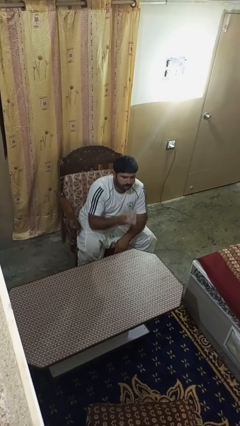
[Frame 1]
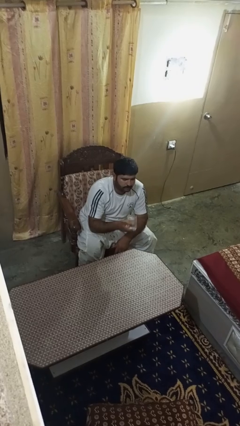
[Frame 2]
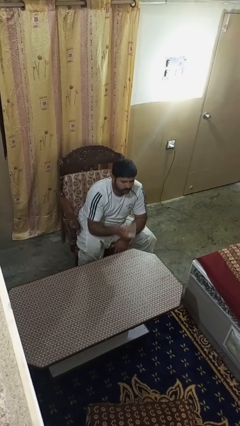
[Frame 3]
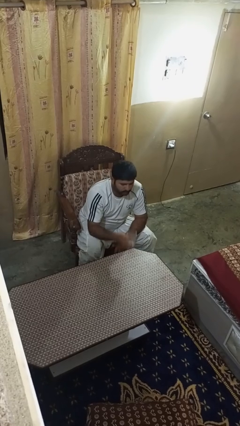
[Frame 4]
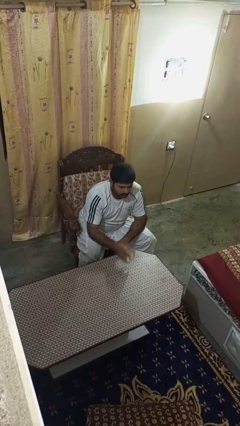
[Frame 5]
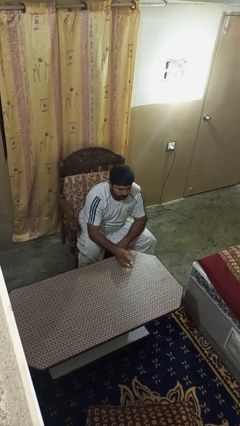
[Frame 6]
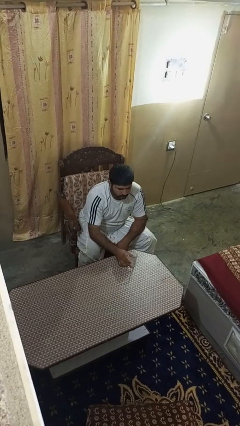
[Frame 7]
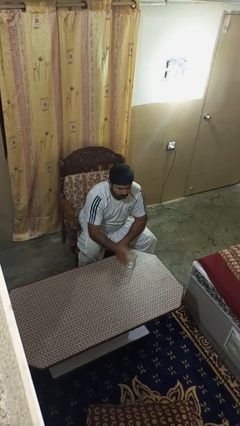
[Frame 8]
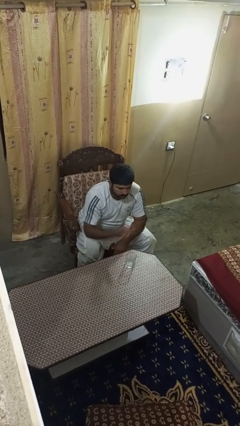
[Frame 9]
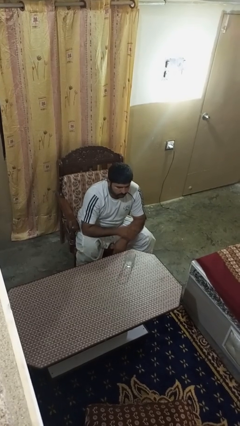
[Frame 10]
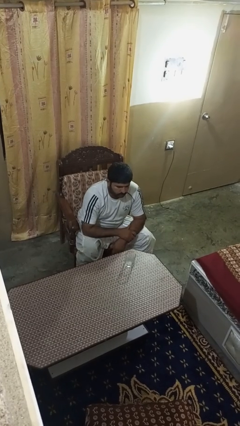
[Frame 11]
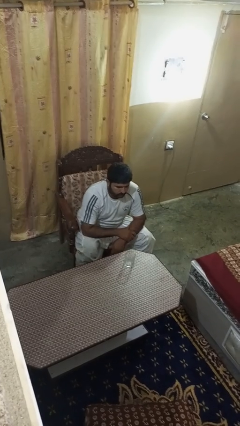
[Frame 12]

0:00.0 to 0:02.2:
person puts down object on table

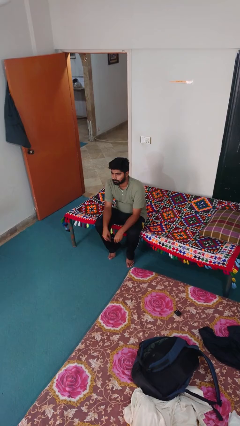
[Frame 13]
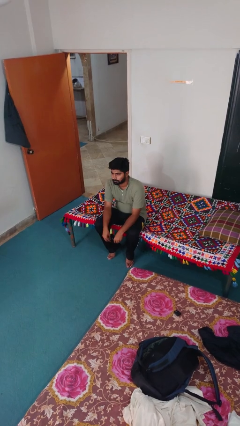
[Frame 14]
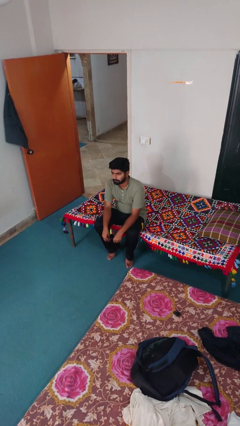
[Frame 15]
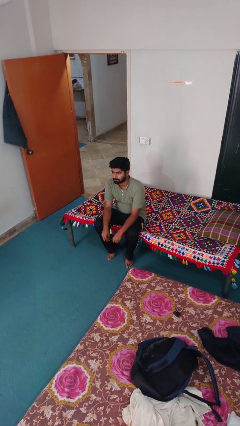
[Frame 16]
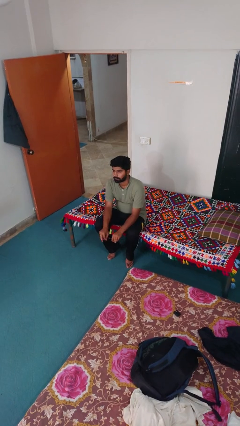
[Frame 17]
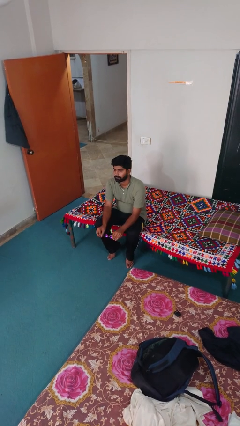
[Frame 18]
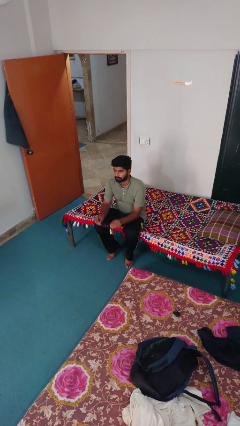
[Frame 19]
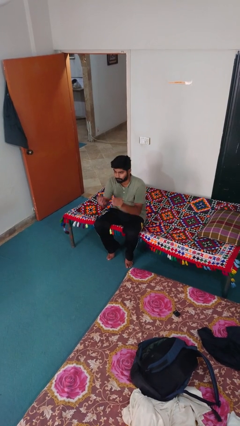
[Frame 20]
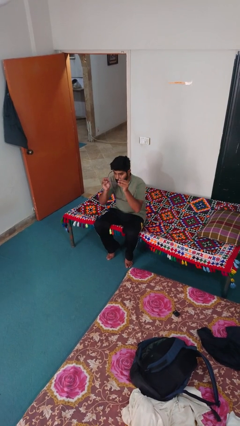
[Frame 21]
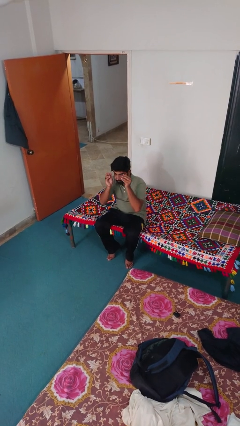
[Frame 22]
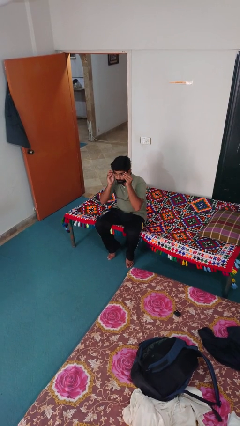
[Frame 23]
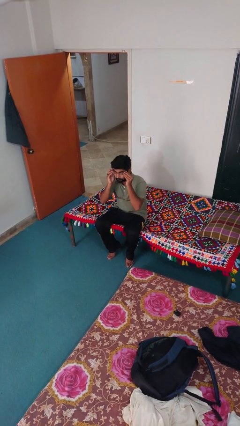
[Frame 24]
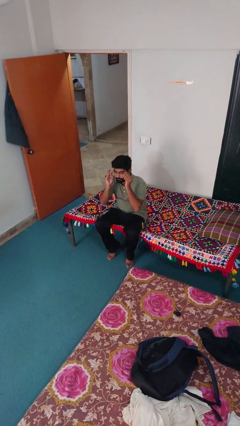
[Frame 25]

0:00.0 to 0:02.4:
person puts on glasses

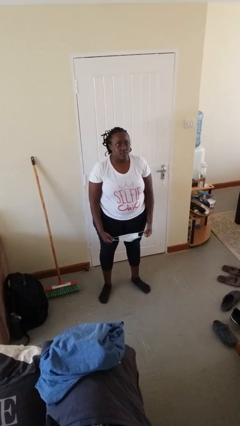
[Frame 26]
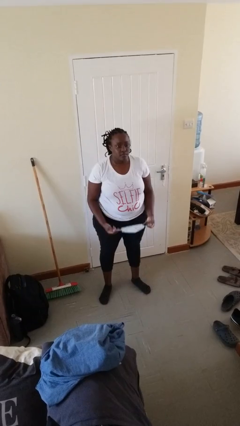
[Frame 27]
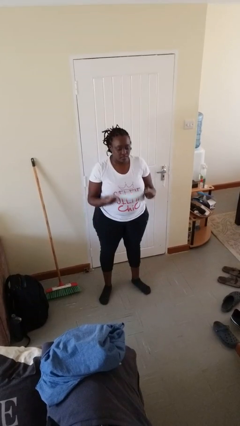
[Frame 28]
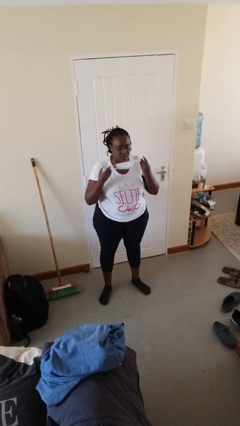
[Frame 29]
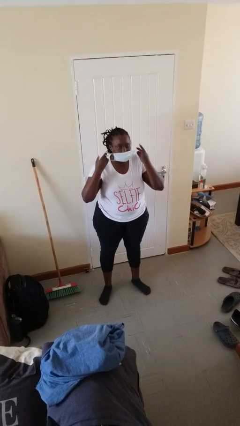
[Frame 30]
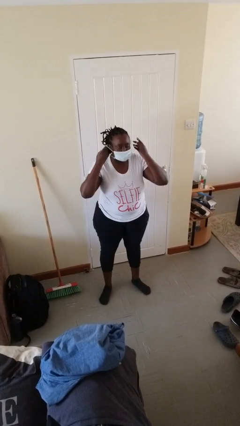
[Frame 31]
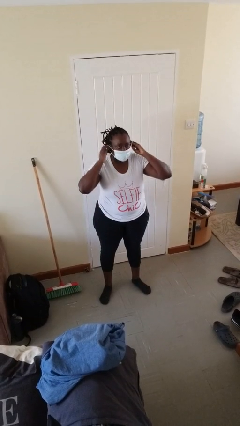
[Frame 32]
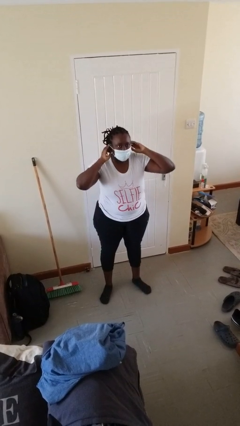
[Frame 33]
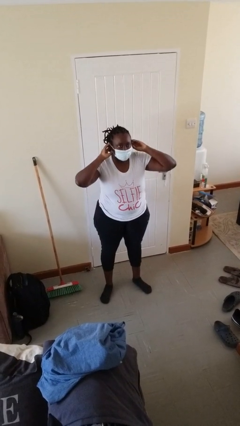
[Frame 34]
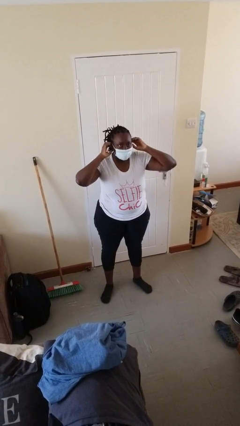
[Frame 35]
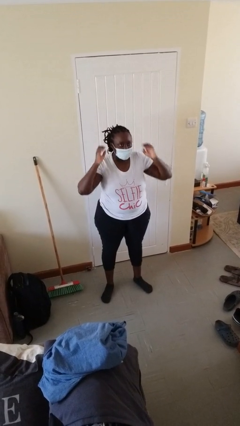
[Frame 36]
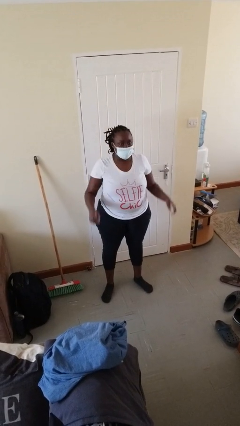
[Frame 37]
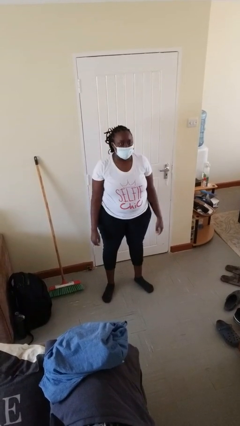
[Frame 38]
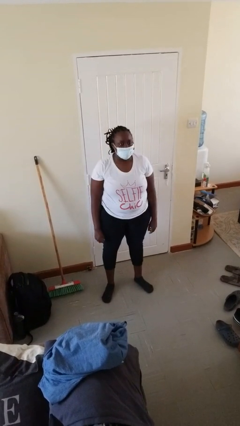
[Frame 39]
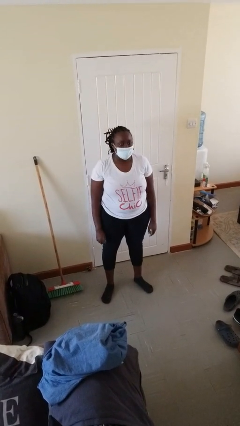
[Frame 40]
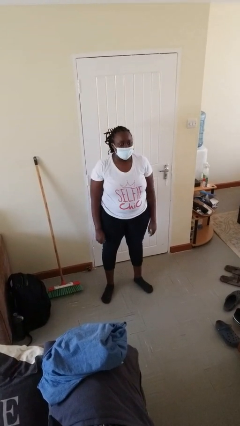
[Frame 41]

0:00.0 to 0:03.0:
person puts on facemask

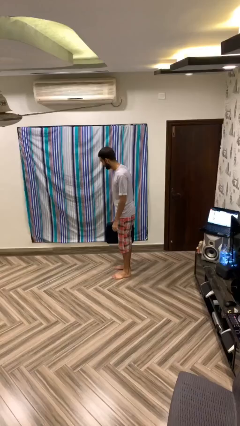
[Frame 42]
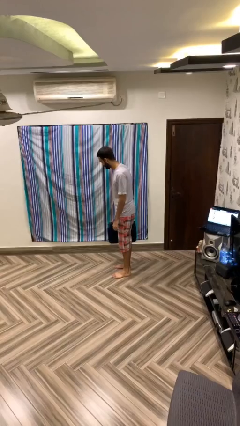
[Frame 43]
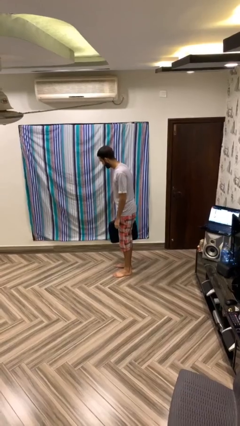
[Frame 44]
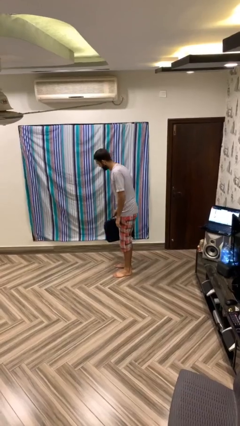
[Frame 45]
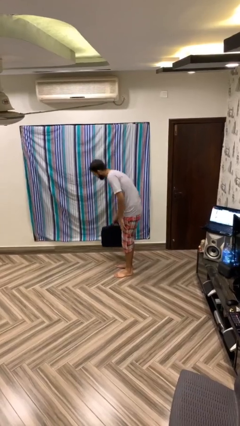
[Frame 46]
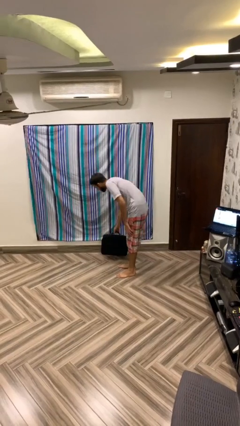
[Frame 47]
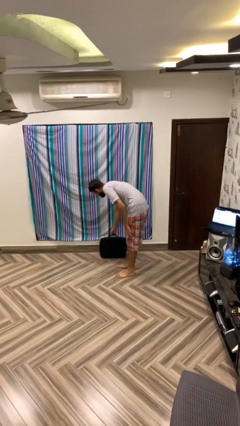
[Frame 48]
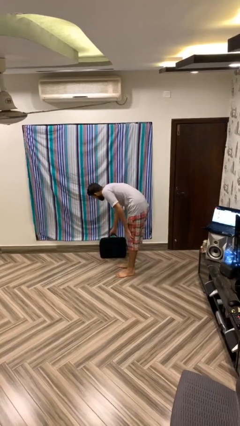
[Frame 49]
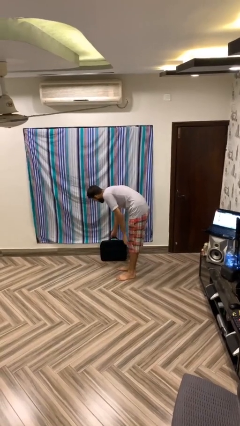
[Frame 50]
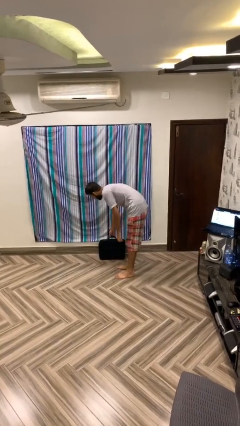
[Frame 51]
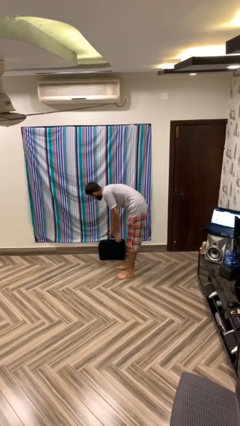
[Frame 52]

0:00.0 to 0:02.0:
person puts down object on floor

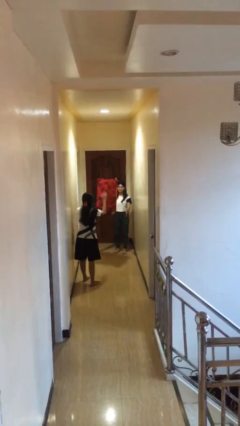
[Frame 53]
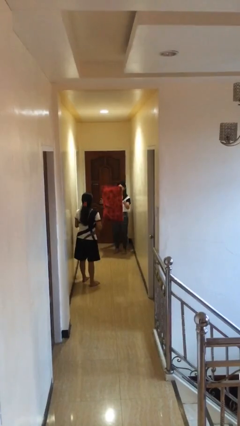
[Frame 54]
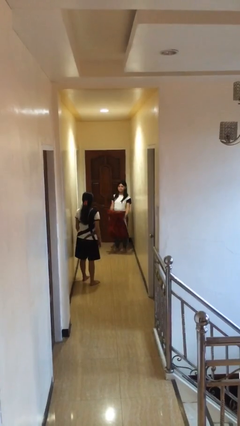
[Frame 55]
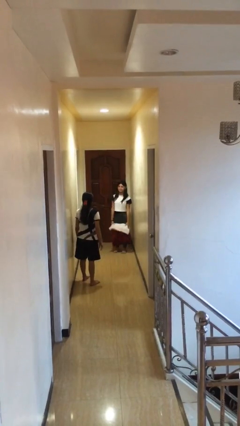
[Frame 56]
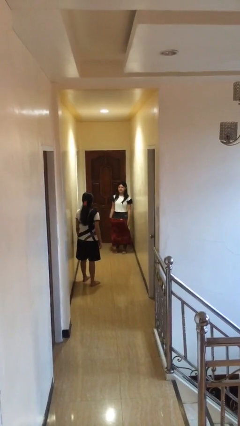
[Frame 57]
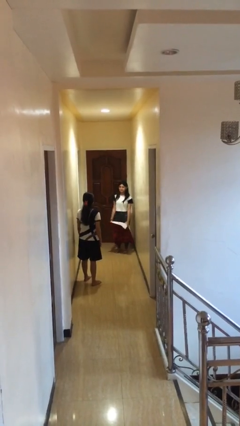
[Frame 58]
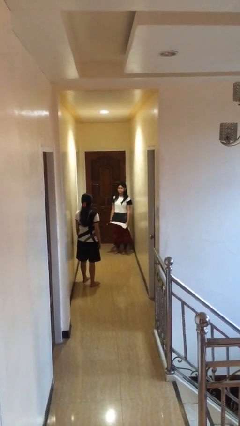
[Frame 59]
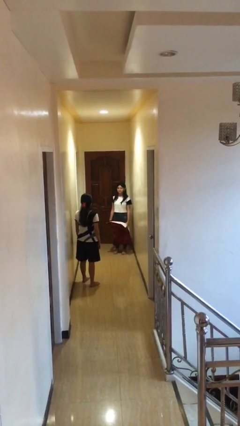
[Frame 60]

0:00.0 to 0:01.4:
person catches object from person

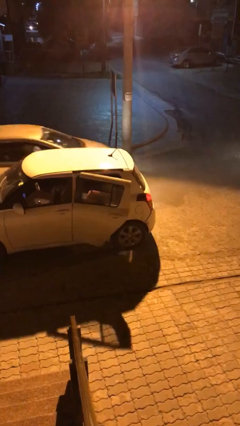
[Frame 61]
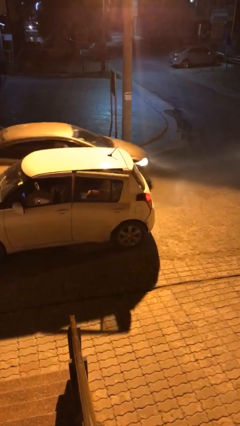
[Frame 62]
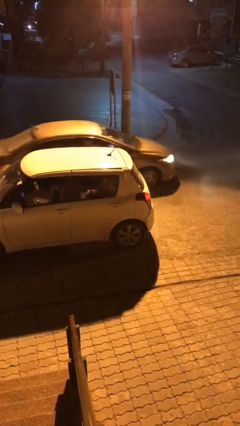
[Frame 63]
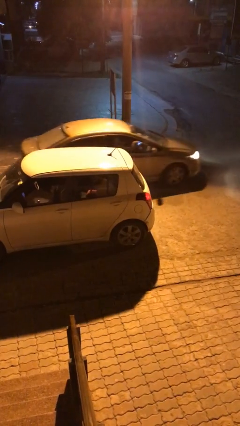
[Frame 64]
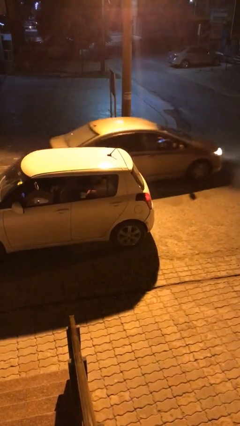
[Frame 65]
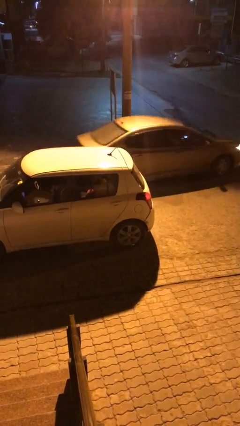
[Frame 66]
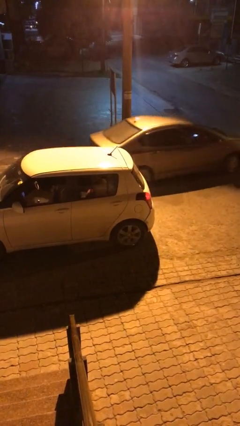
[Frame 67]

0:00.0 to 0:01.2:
person closes car door

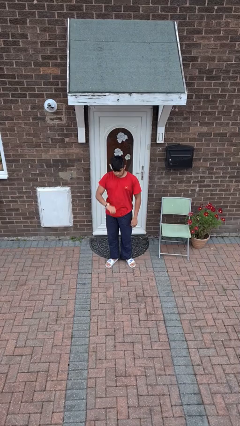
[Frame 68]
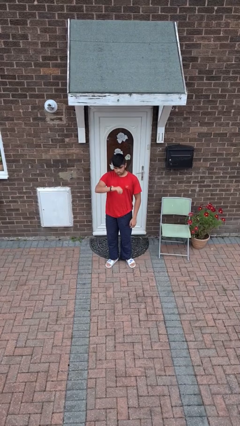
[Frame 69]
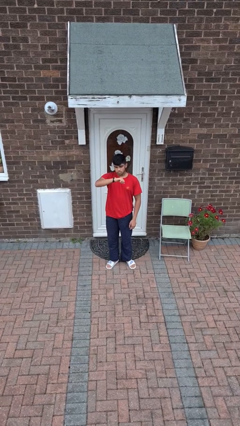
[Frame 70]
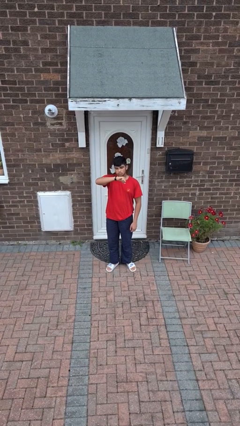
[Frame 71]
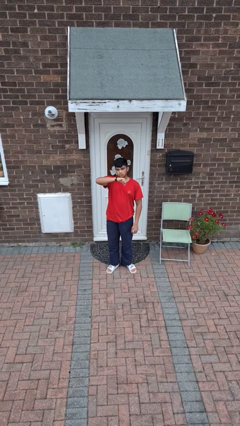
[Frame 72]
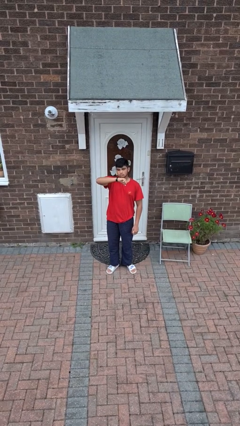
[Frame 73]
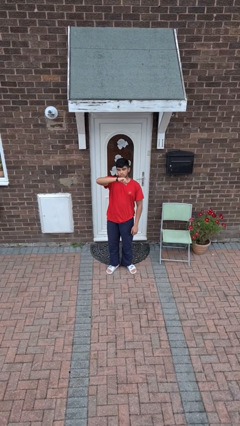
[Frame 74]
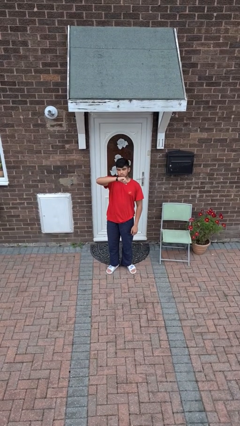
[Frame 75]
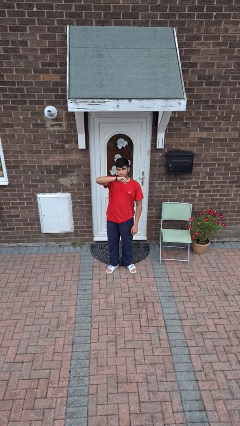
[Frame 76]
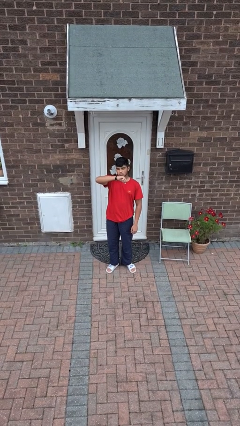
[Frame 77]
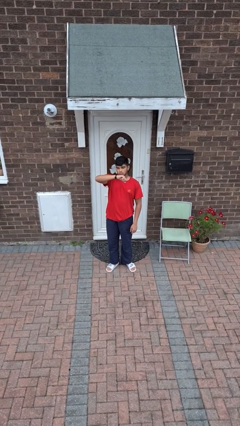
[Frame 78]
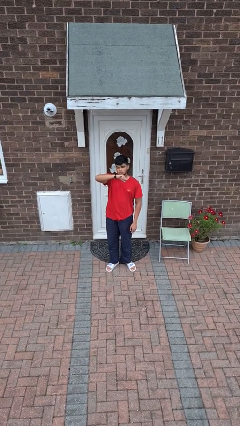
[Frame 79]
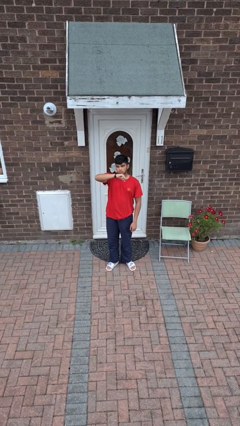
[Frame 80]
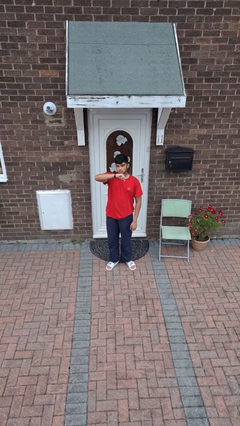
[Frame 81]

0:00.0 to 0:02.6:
person looks at wristwatch

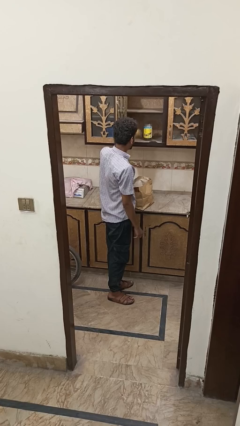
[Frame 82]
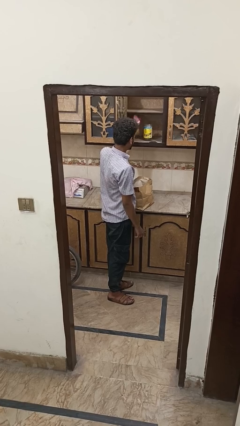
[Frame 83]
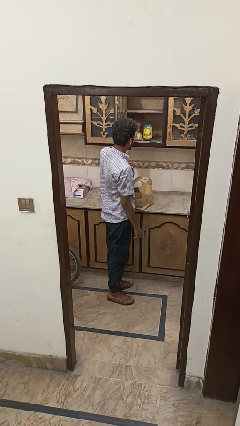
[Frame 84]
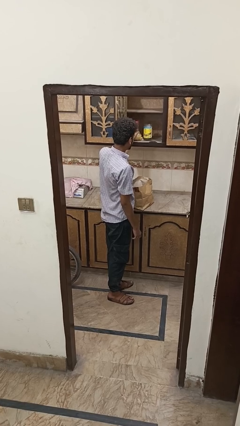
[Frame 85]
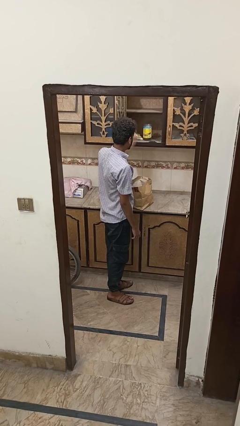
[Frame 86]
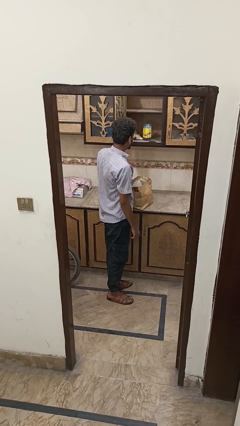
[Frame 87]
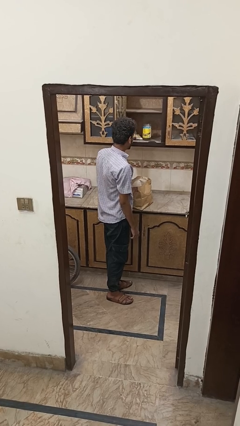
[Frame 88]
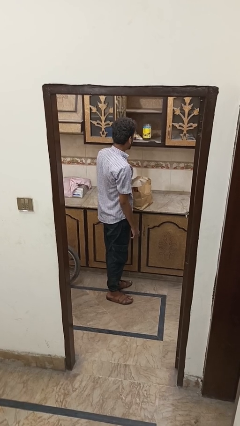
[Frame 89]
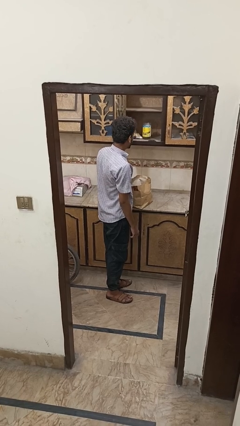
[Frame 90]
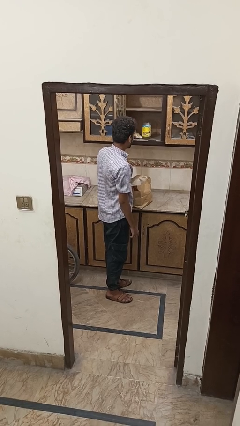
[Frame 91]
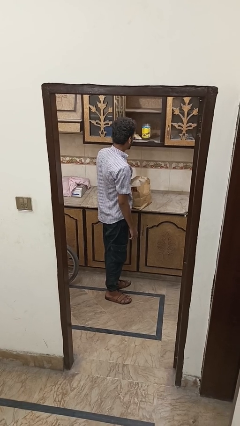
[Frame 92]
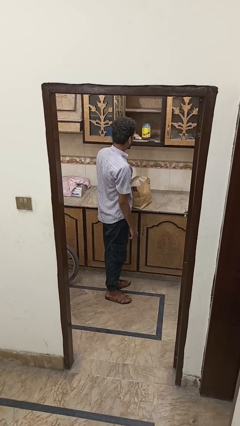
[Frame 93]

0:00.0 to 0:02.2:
person uncovers with bedsheets
